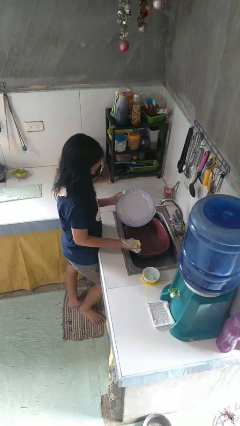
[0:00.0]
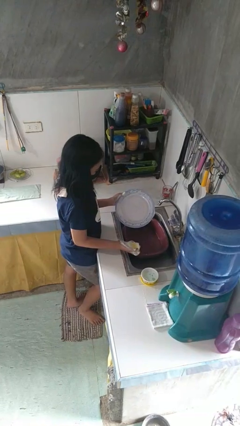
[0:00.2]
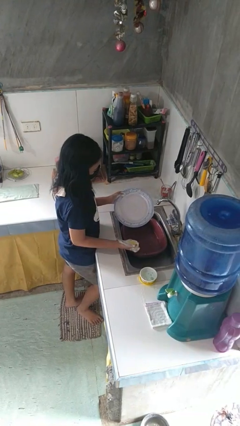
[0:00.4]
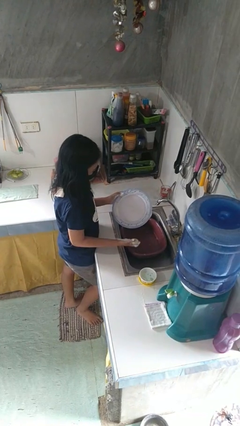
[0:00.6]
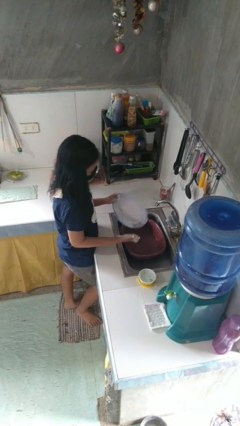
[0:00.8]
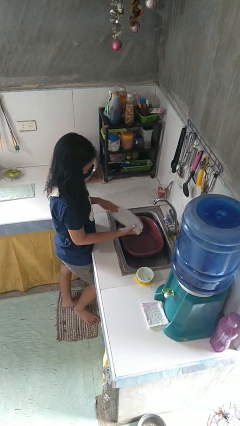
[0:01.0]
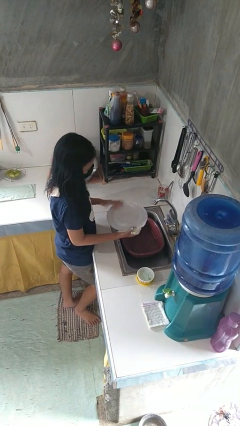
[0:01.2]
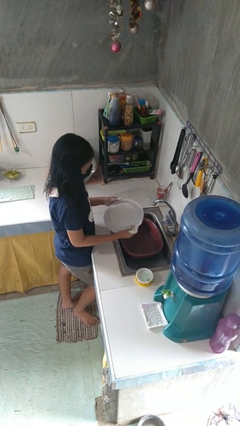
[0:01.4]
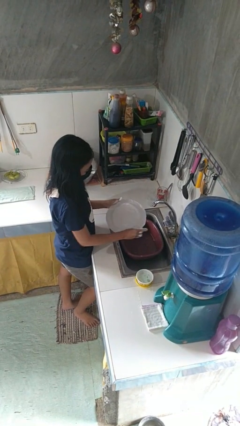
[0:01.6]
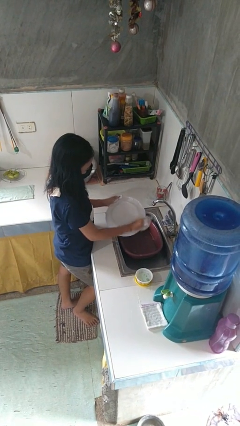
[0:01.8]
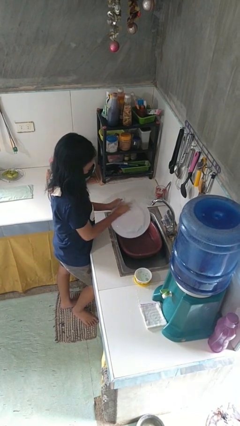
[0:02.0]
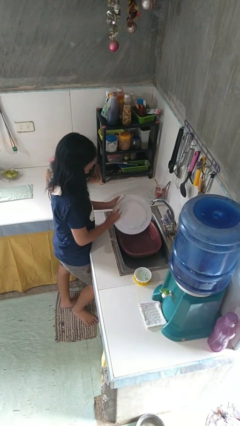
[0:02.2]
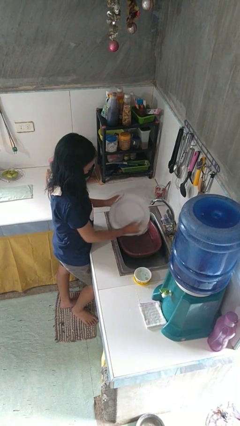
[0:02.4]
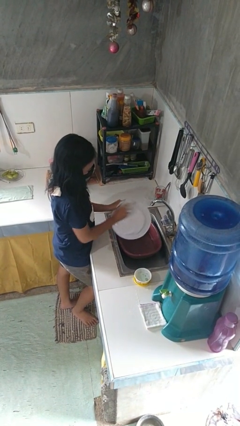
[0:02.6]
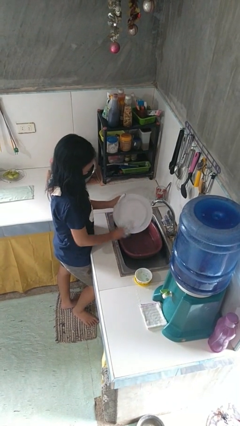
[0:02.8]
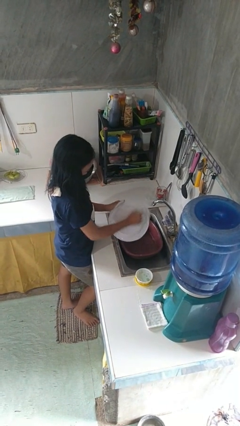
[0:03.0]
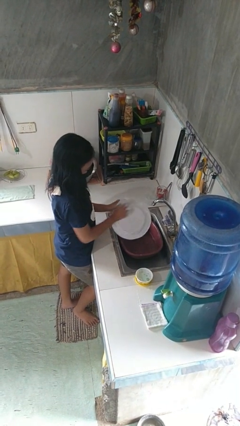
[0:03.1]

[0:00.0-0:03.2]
person washes dish

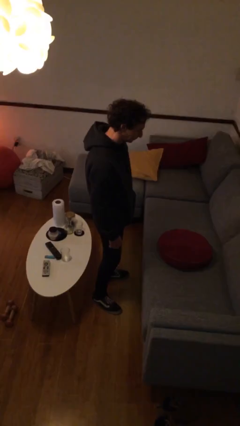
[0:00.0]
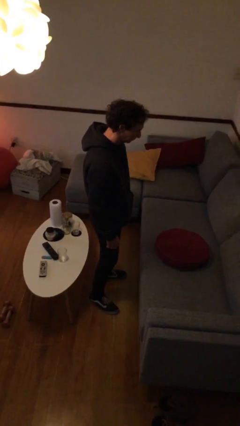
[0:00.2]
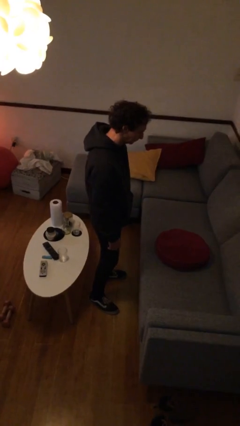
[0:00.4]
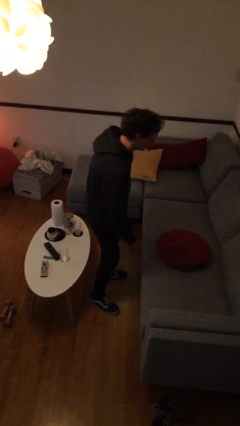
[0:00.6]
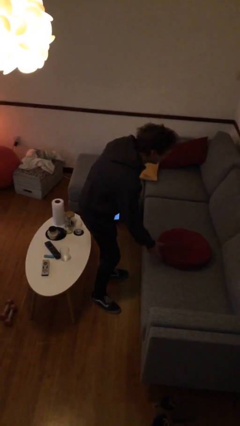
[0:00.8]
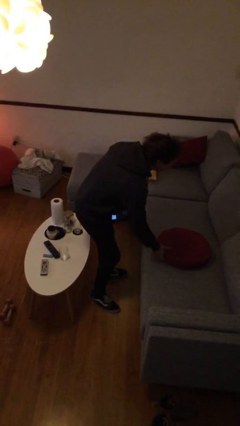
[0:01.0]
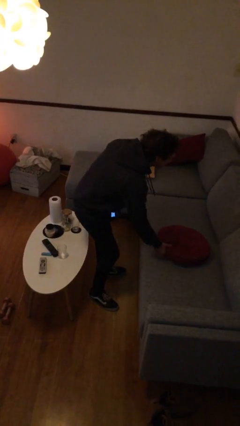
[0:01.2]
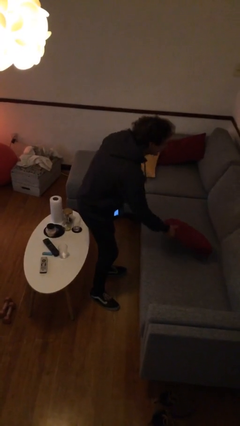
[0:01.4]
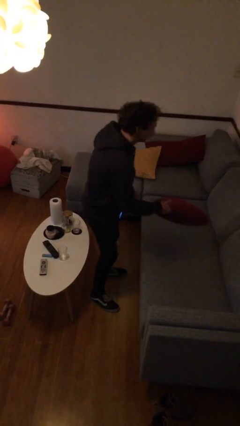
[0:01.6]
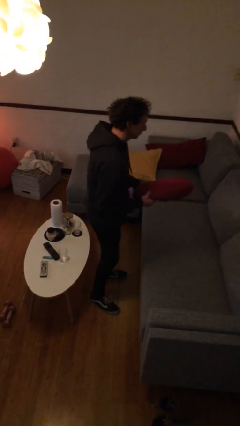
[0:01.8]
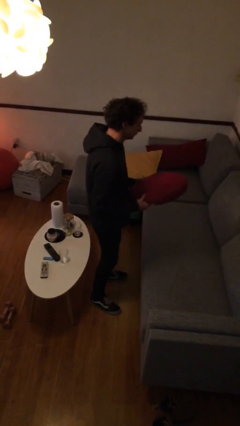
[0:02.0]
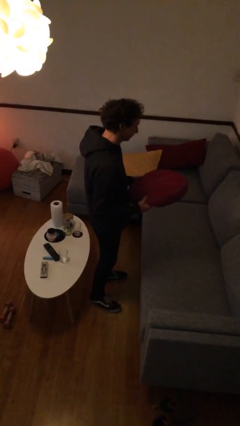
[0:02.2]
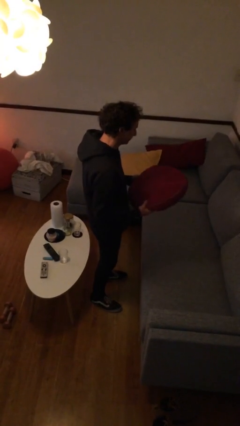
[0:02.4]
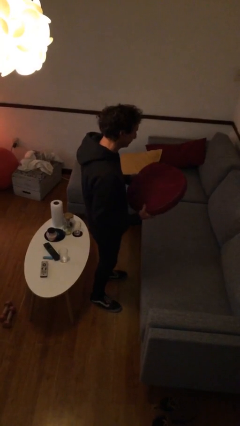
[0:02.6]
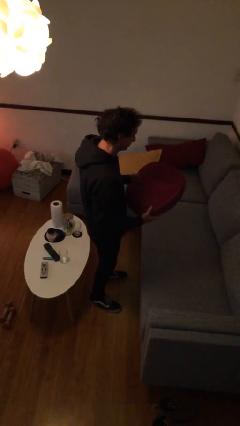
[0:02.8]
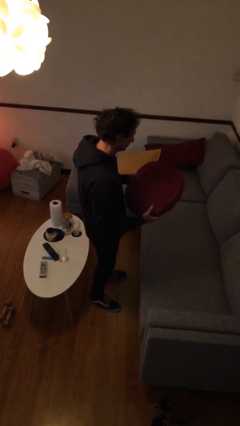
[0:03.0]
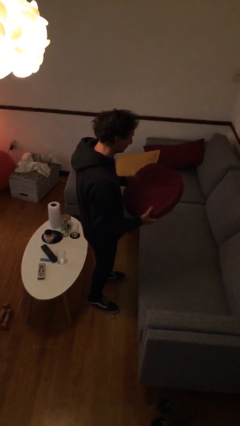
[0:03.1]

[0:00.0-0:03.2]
person picks up object from couch

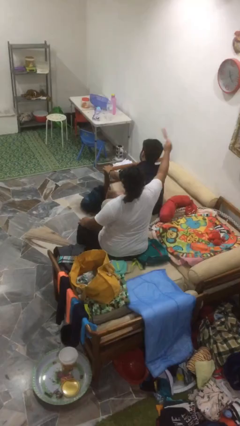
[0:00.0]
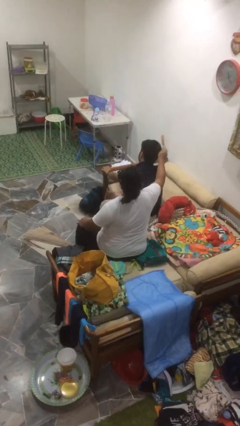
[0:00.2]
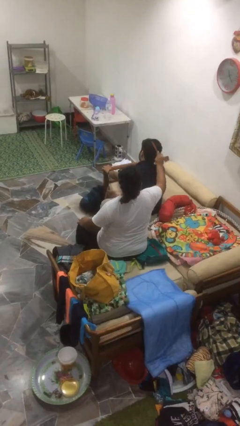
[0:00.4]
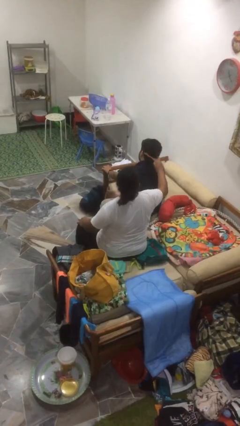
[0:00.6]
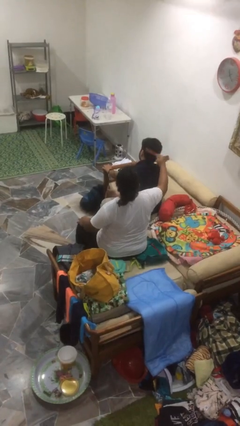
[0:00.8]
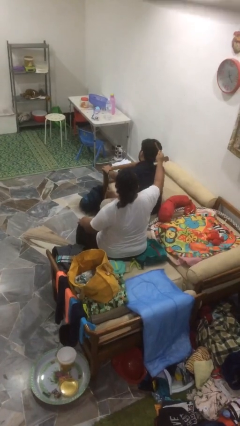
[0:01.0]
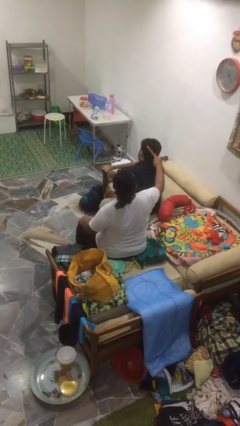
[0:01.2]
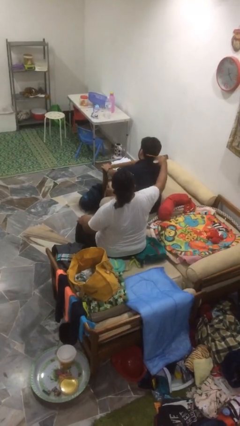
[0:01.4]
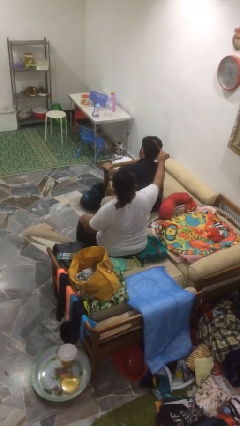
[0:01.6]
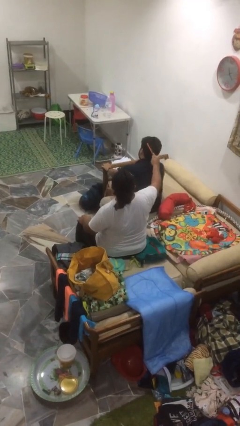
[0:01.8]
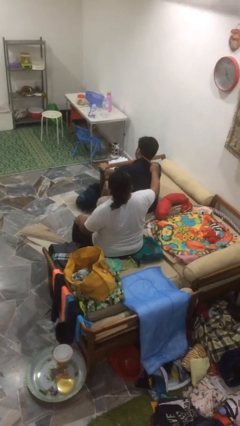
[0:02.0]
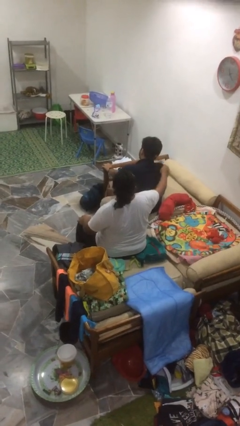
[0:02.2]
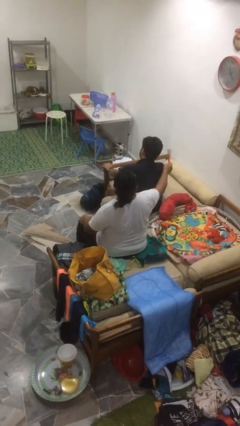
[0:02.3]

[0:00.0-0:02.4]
person brushes hair of person

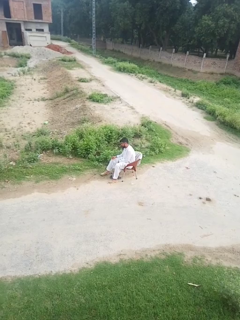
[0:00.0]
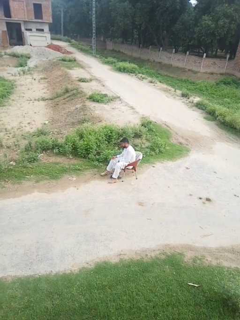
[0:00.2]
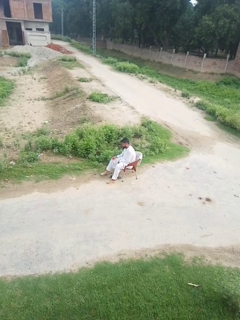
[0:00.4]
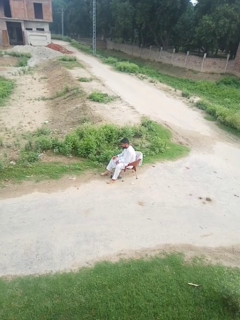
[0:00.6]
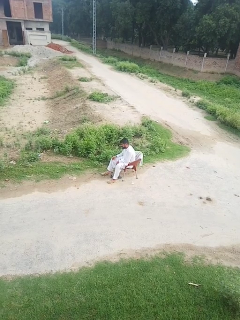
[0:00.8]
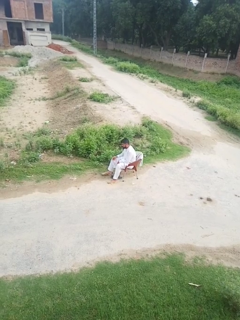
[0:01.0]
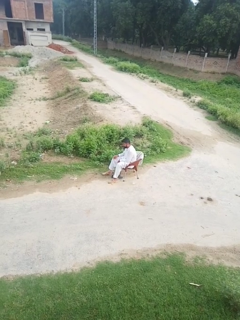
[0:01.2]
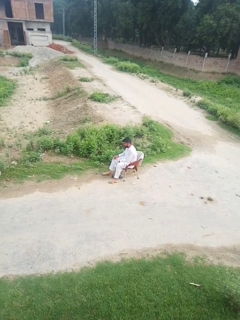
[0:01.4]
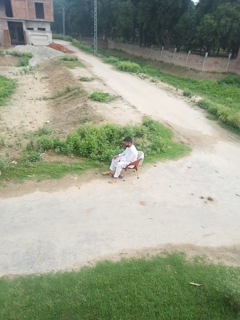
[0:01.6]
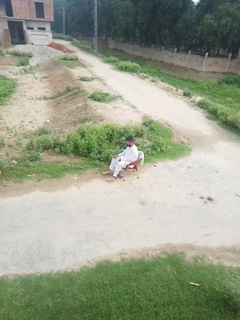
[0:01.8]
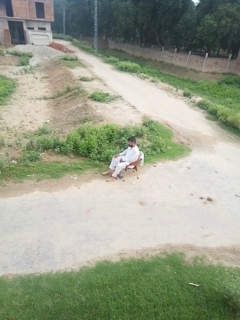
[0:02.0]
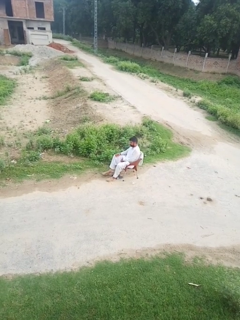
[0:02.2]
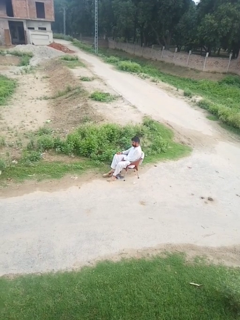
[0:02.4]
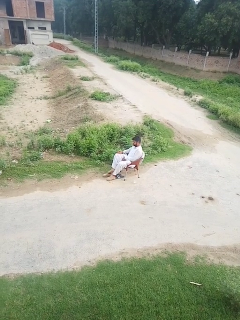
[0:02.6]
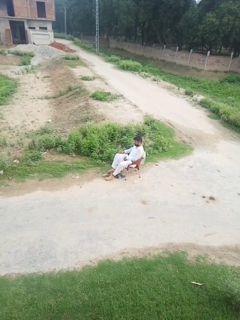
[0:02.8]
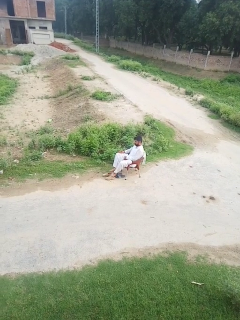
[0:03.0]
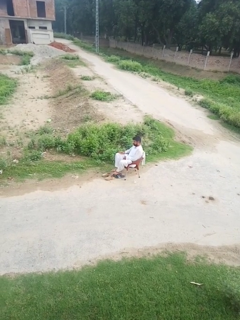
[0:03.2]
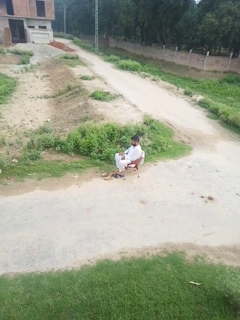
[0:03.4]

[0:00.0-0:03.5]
person takes off shoes

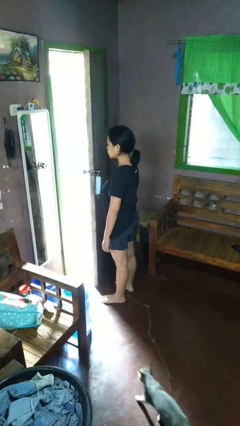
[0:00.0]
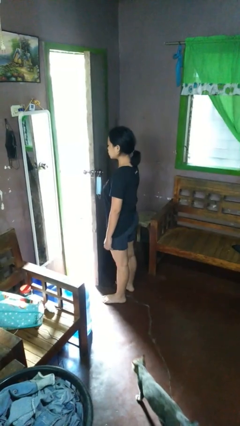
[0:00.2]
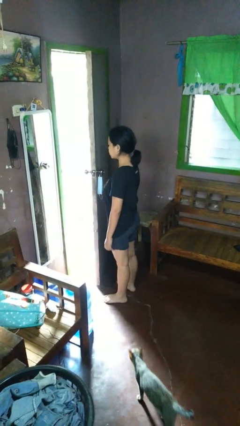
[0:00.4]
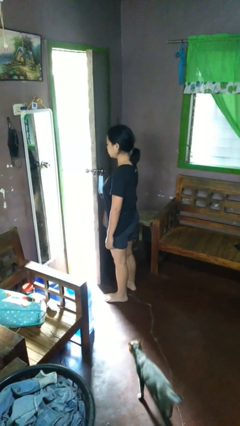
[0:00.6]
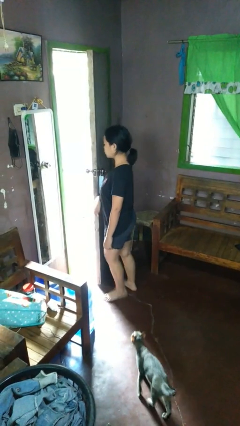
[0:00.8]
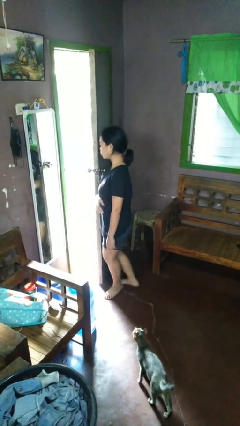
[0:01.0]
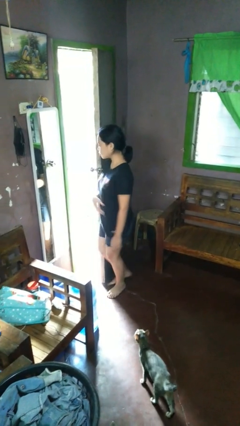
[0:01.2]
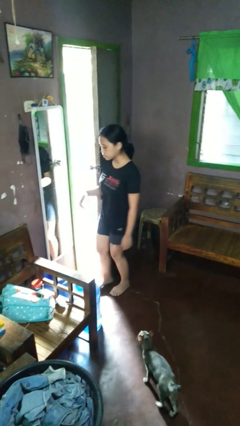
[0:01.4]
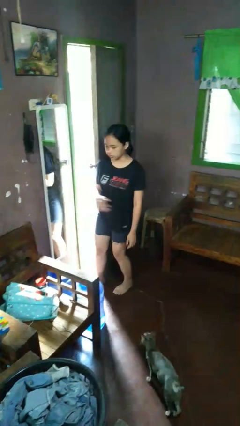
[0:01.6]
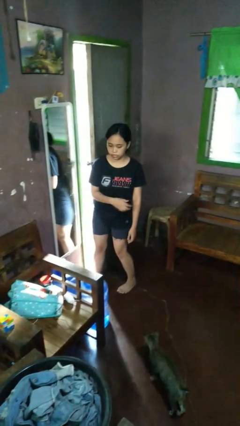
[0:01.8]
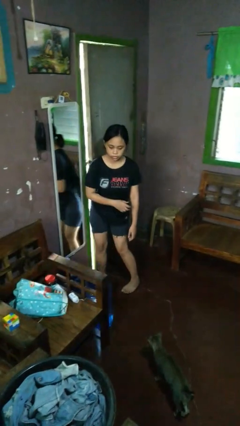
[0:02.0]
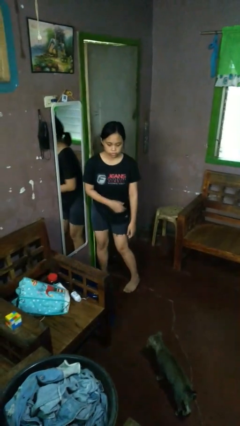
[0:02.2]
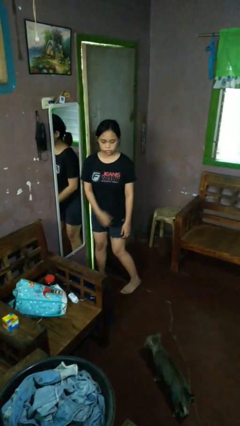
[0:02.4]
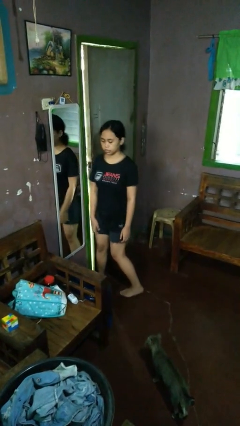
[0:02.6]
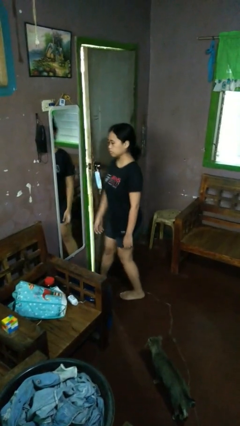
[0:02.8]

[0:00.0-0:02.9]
person closes door with hip

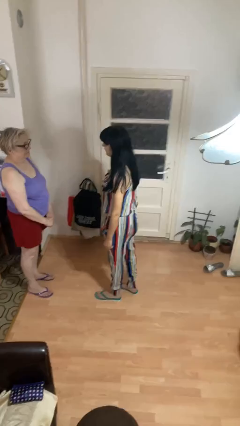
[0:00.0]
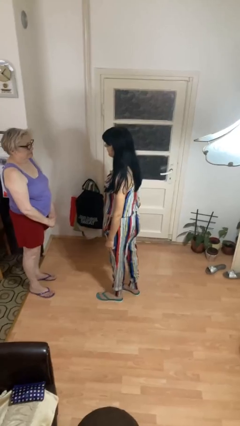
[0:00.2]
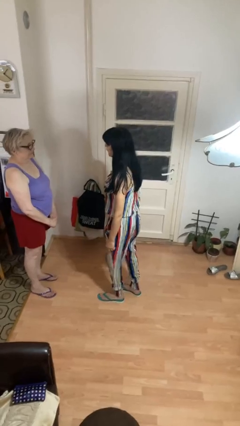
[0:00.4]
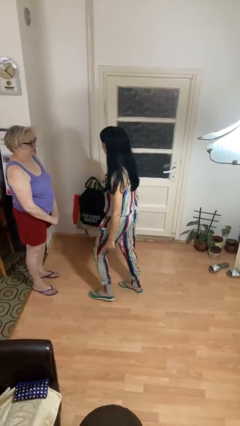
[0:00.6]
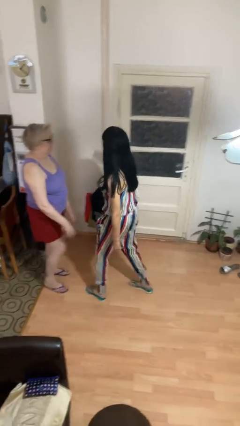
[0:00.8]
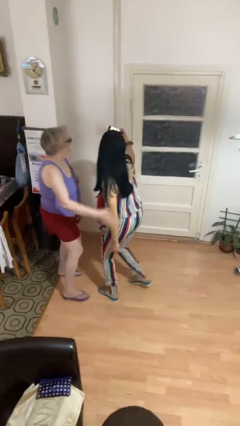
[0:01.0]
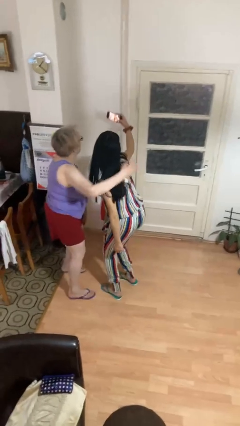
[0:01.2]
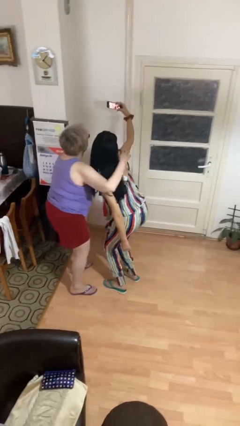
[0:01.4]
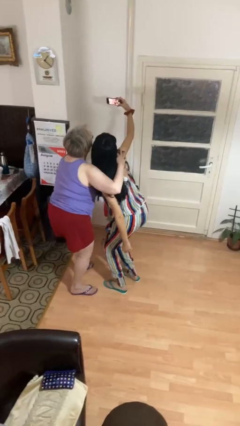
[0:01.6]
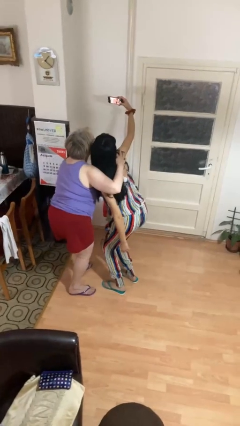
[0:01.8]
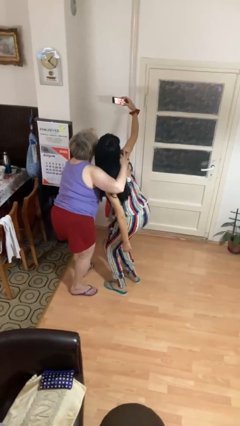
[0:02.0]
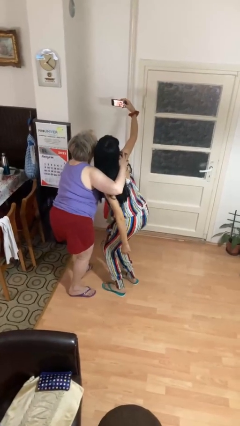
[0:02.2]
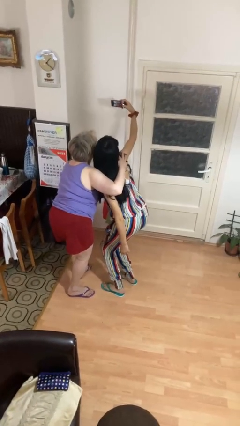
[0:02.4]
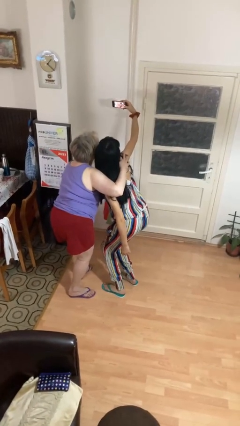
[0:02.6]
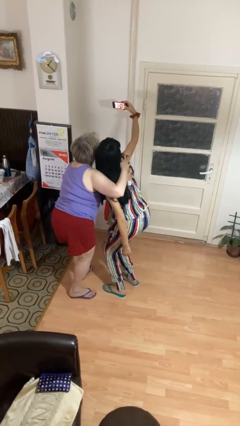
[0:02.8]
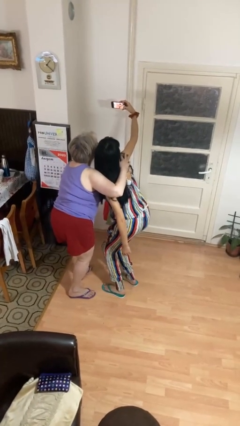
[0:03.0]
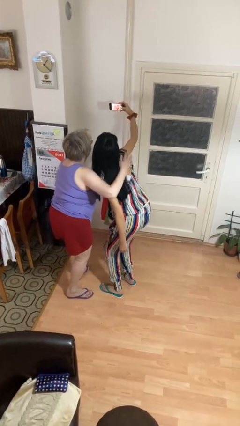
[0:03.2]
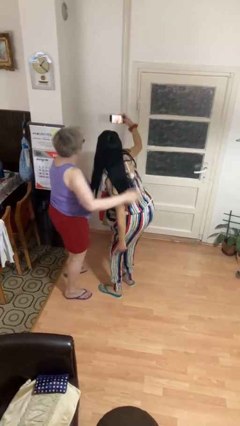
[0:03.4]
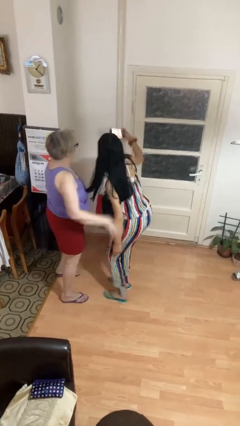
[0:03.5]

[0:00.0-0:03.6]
person takes selfie with person
